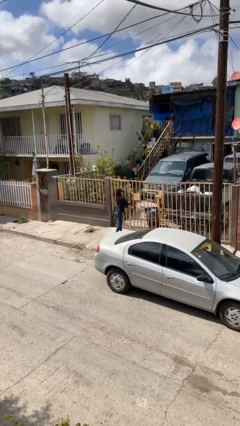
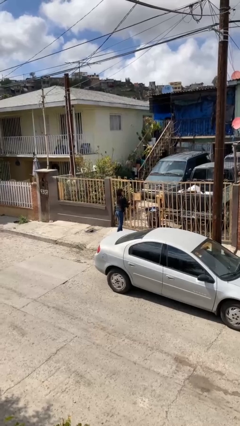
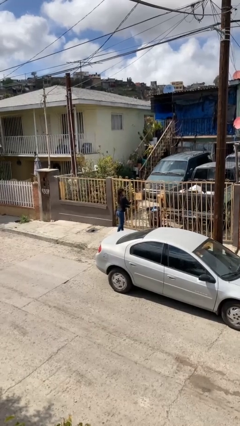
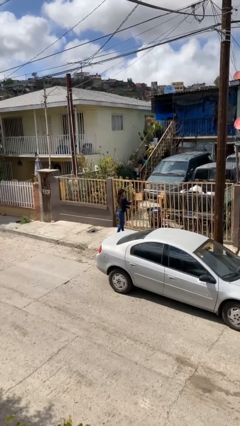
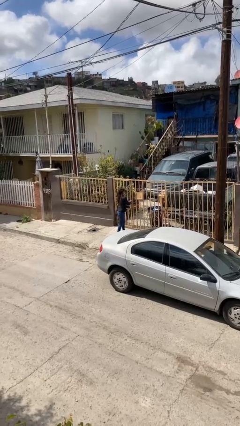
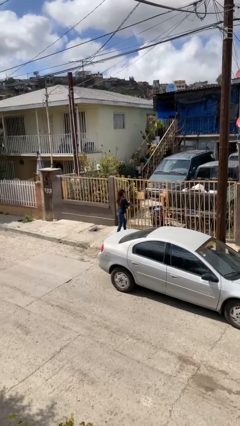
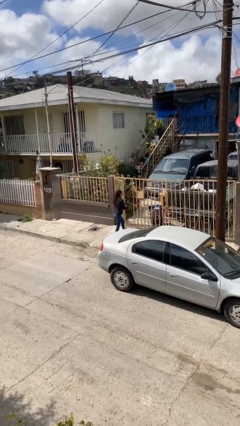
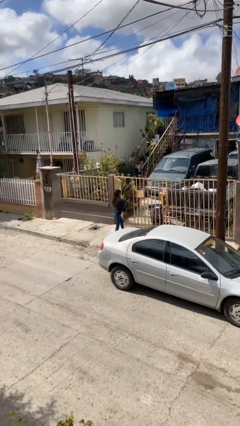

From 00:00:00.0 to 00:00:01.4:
person opens facility door

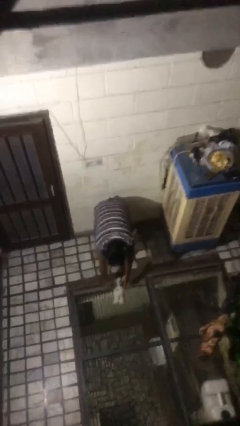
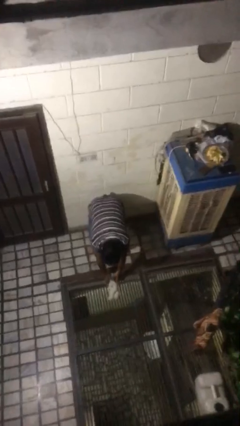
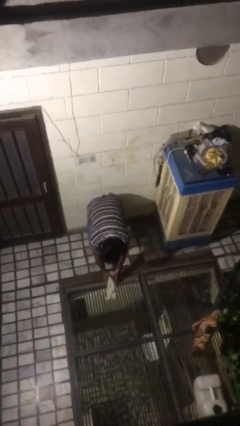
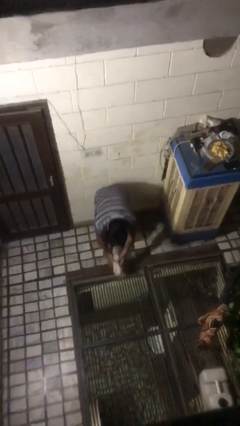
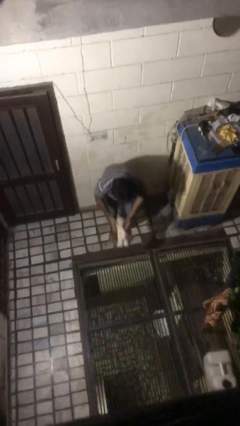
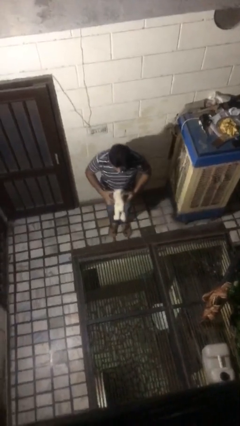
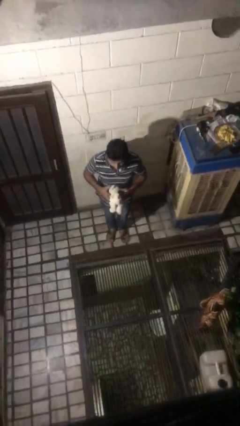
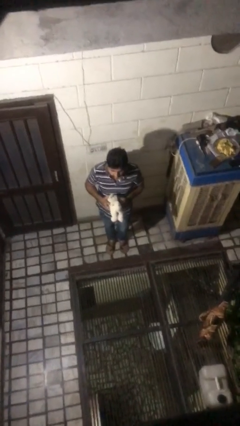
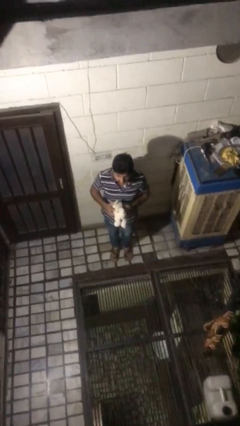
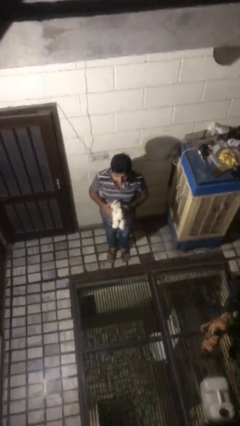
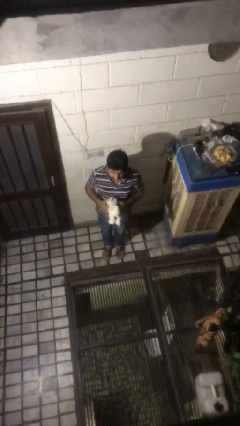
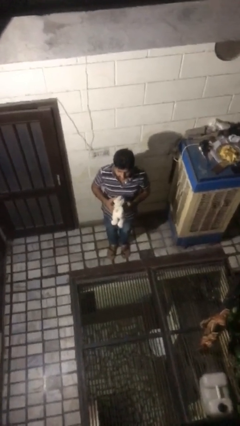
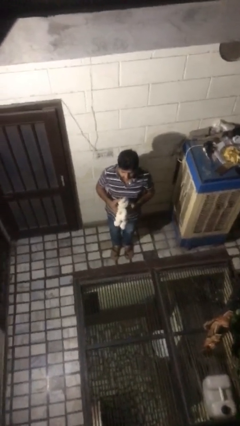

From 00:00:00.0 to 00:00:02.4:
person picks up object from floor

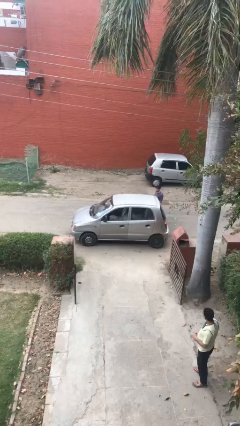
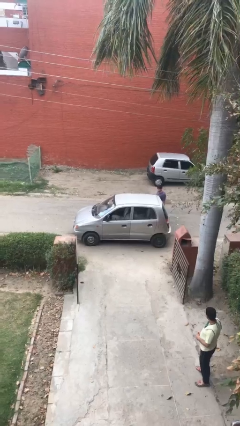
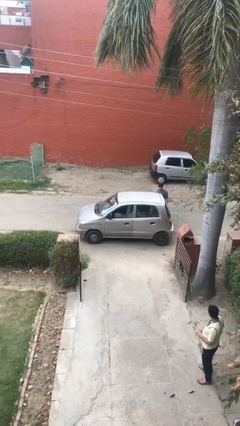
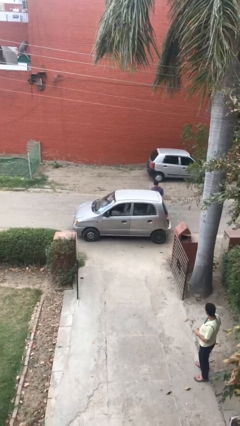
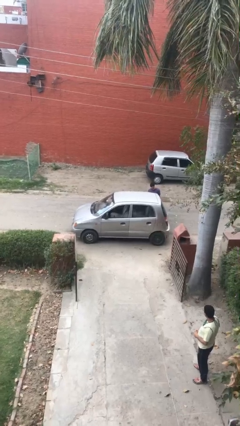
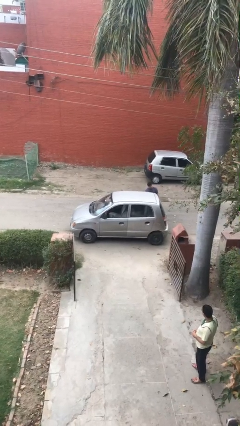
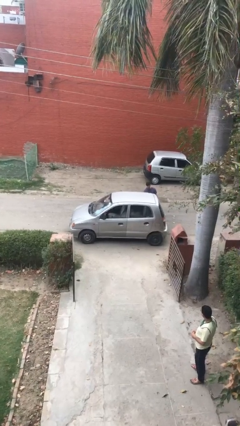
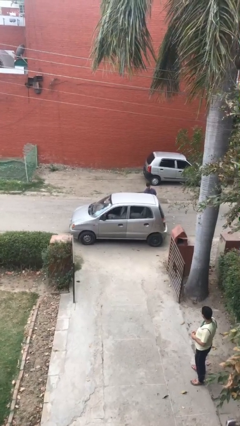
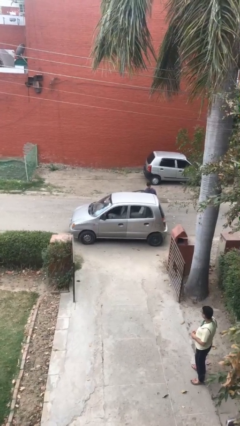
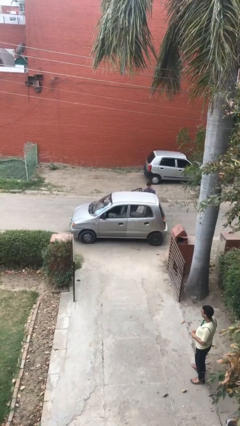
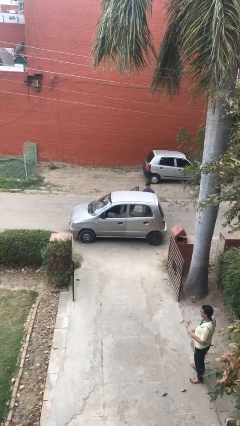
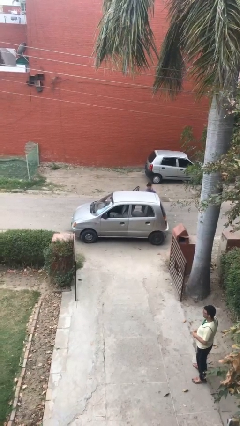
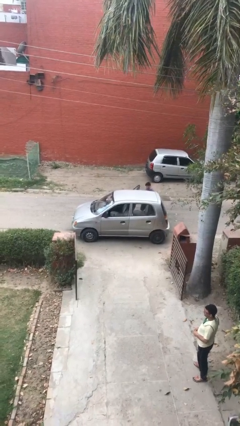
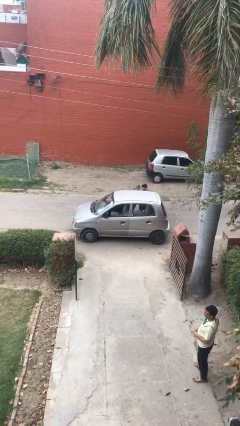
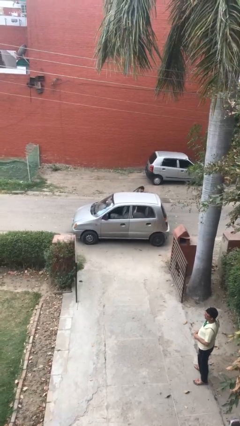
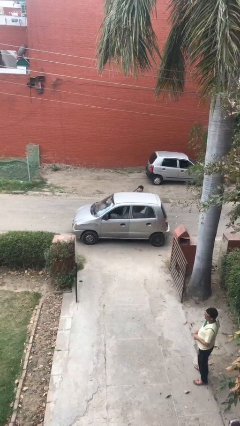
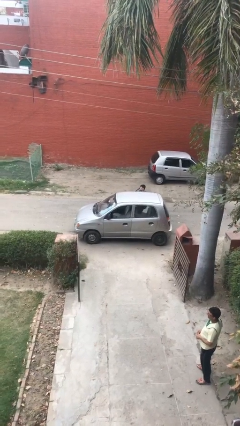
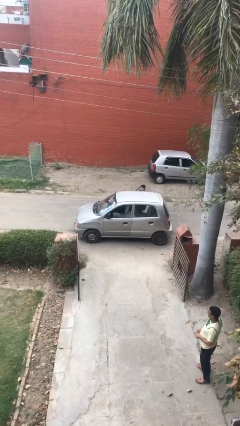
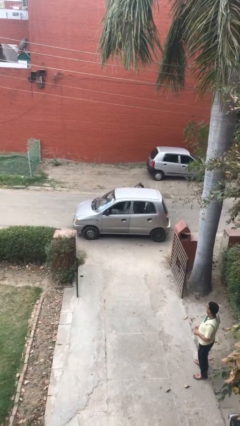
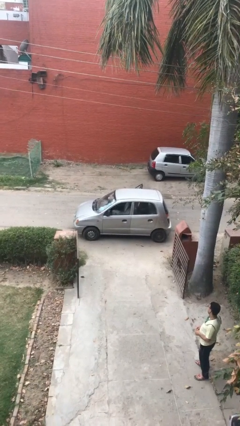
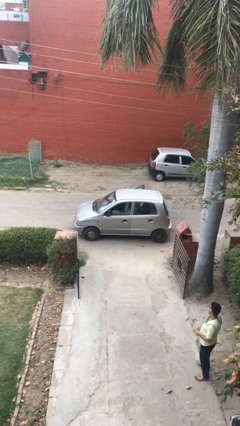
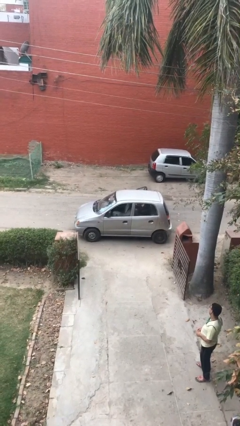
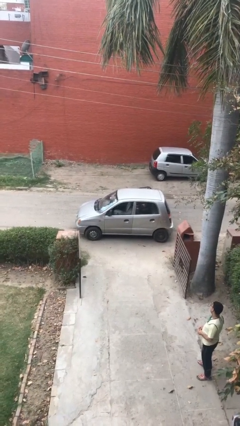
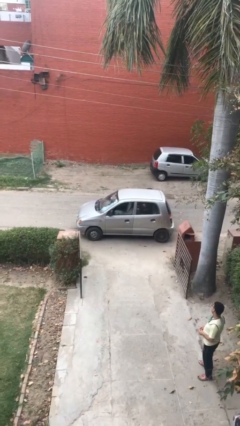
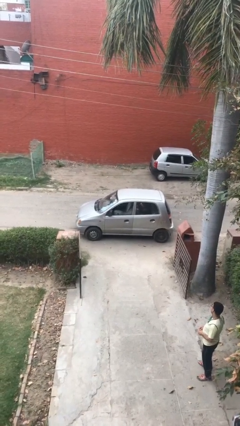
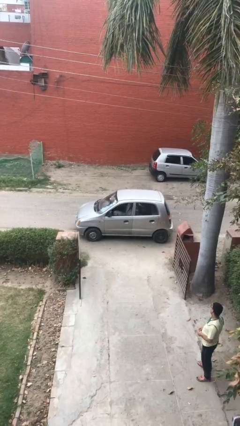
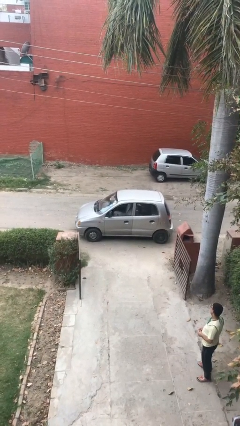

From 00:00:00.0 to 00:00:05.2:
car picks up person

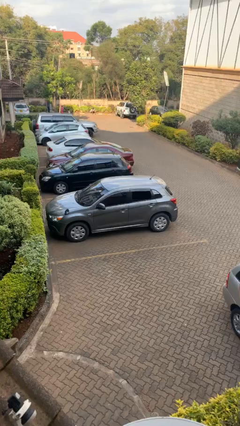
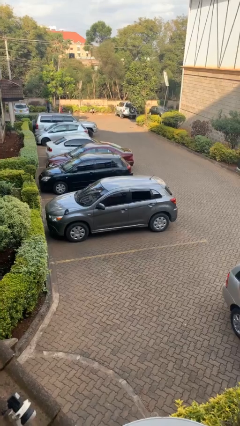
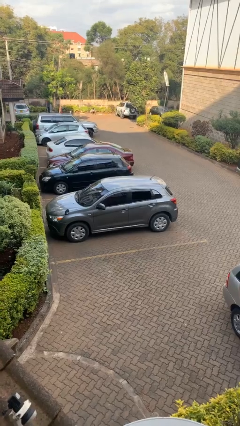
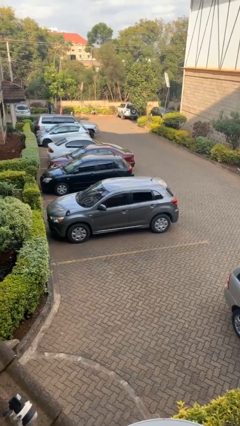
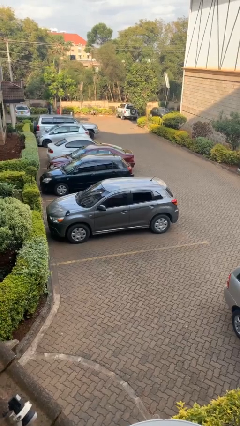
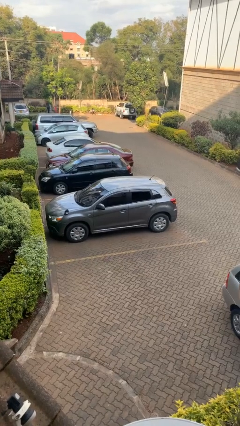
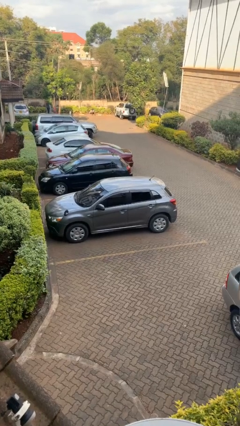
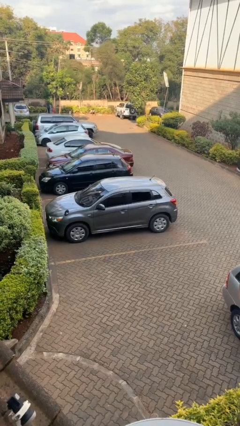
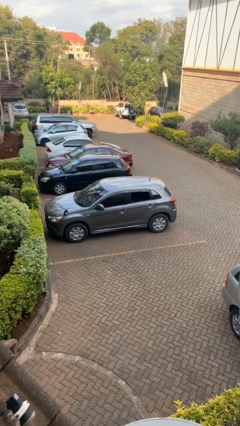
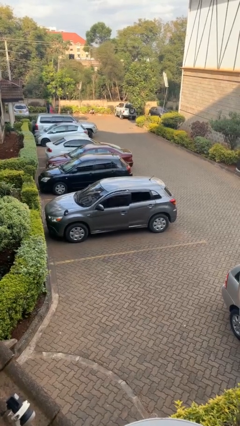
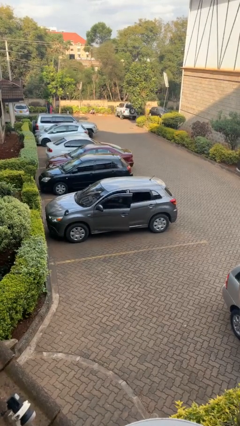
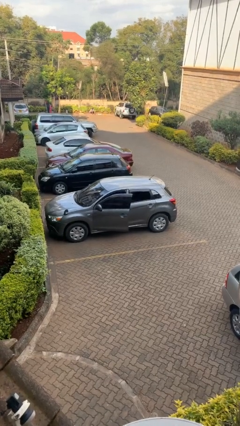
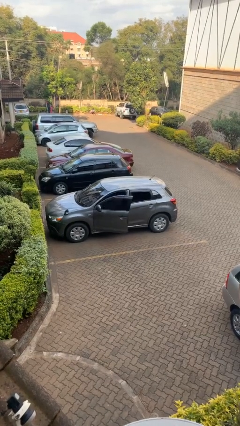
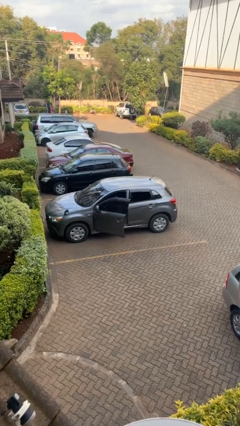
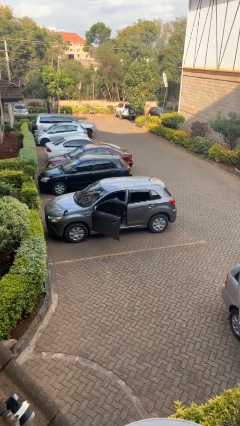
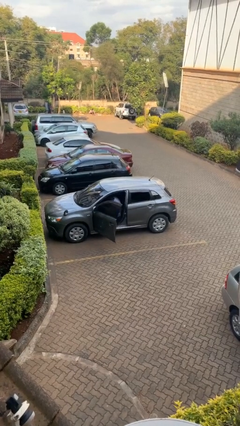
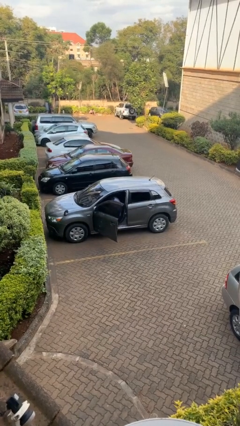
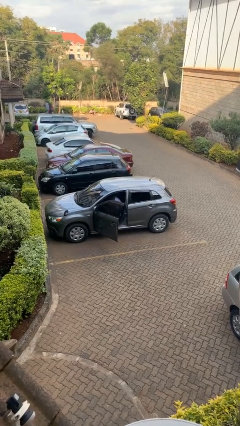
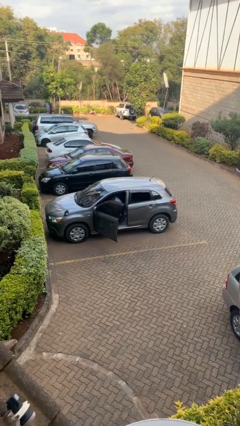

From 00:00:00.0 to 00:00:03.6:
person opens car door

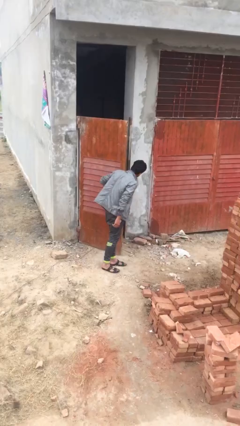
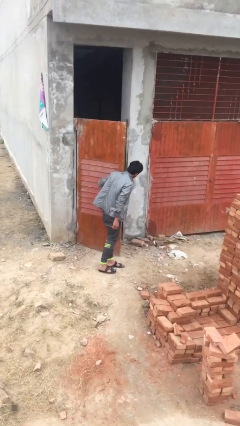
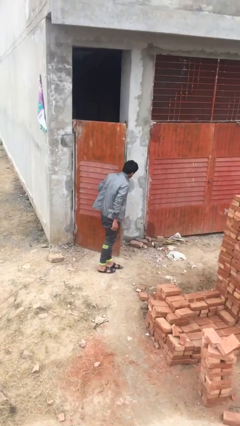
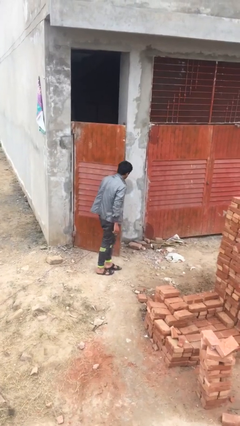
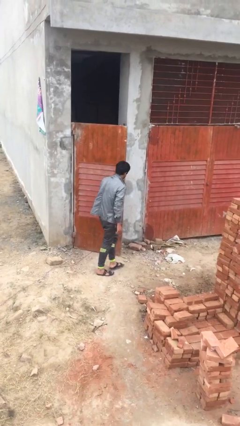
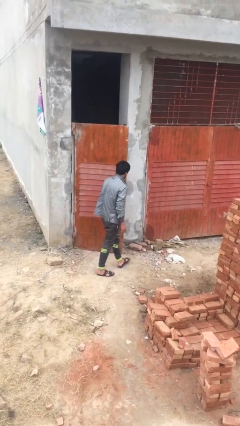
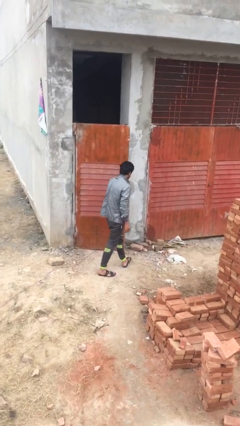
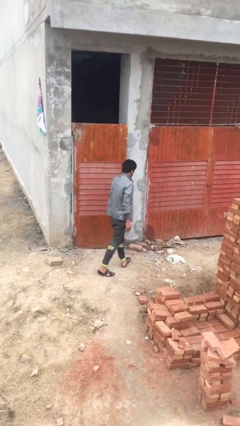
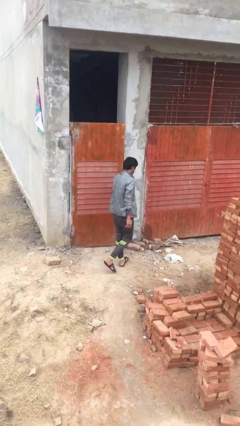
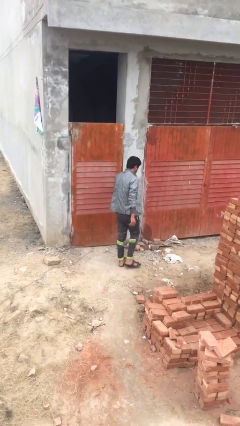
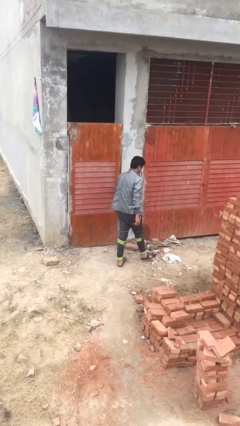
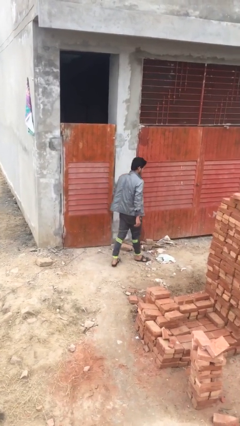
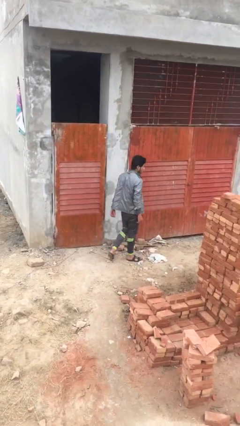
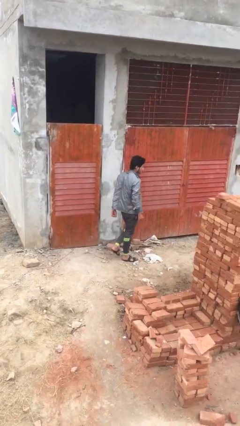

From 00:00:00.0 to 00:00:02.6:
person closes facility door

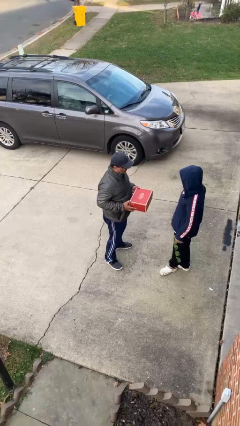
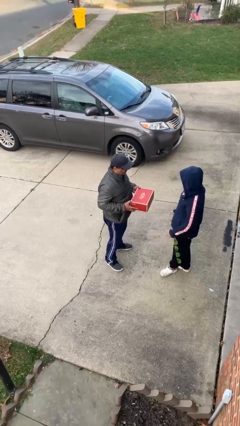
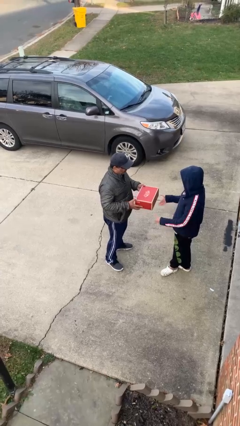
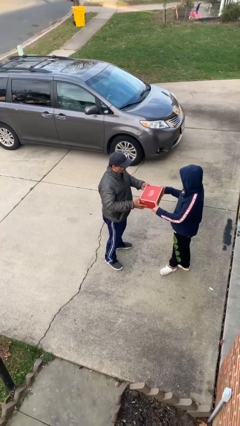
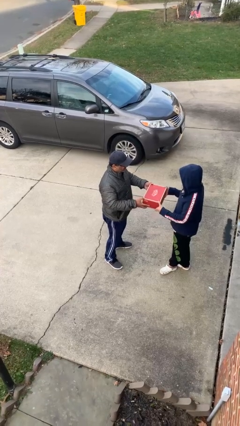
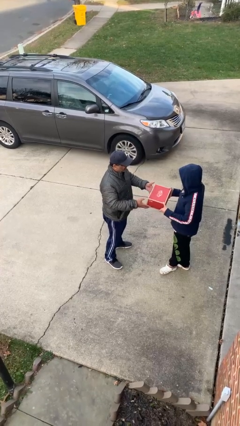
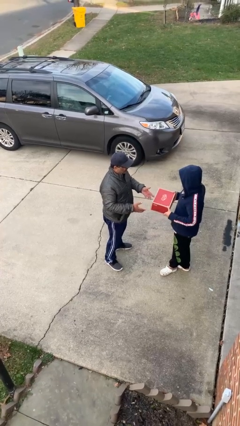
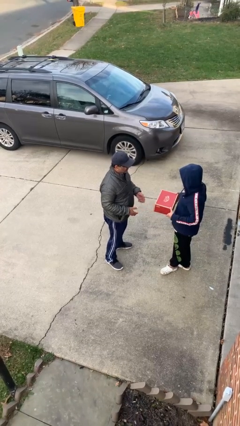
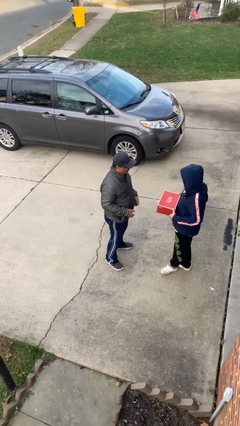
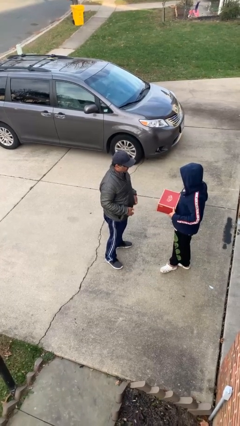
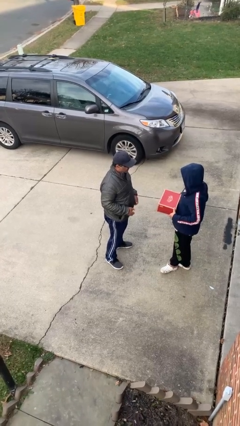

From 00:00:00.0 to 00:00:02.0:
person transfers object to person
